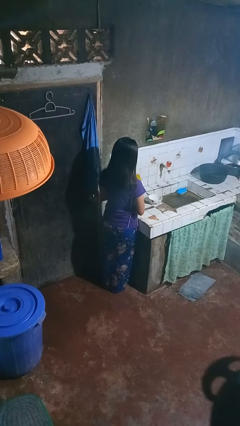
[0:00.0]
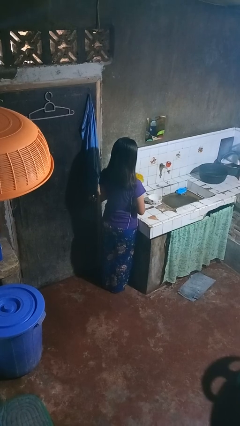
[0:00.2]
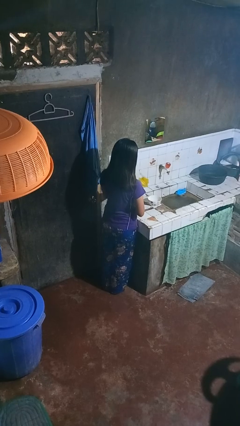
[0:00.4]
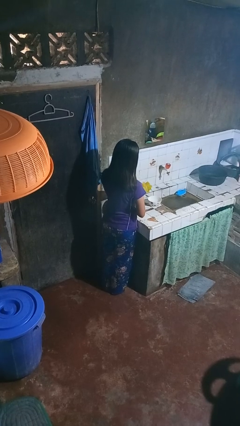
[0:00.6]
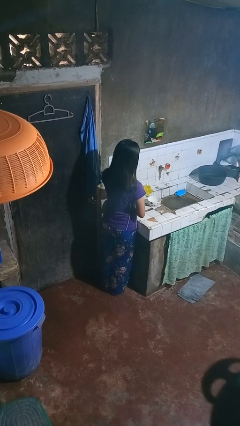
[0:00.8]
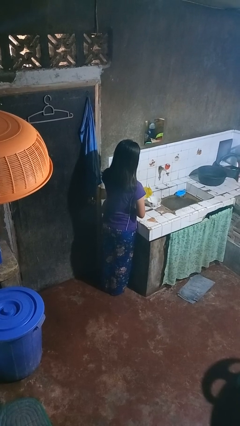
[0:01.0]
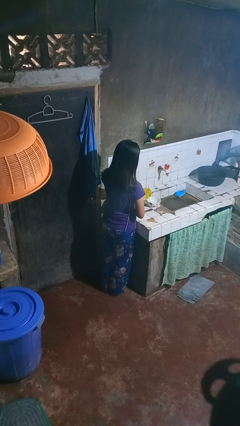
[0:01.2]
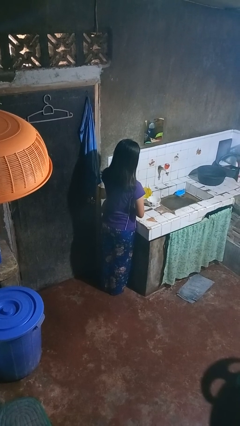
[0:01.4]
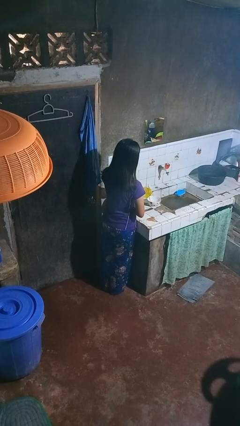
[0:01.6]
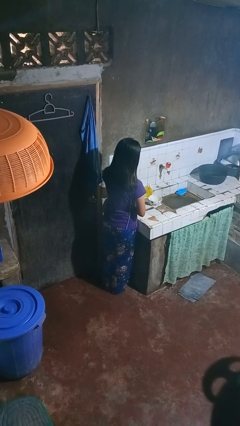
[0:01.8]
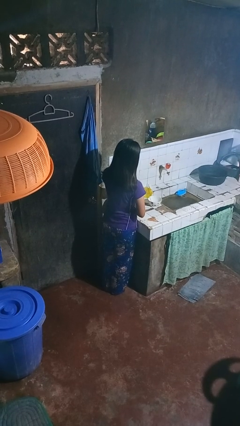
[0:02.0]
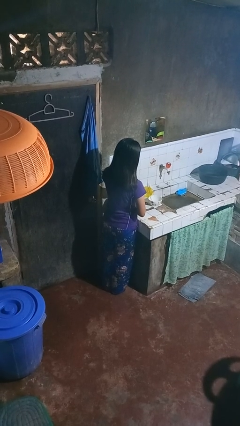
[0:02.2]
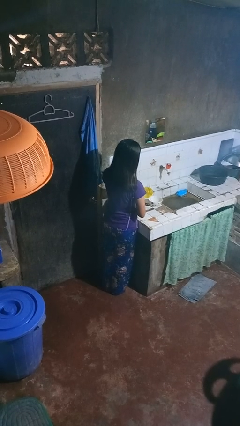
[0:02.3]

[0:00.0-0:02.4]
person pours into bowl

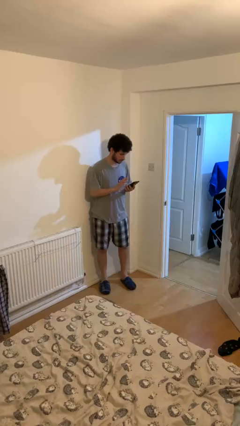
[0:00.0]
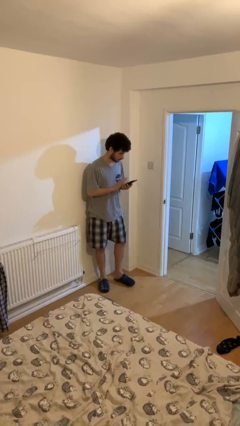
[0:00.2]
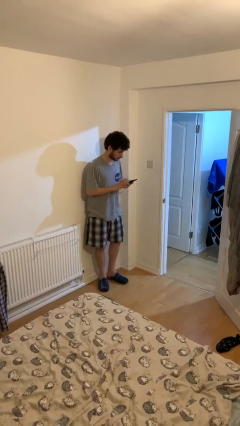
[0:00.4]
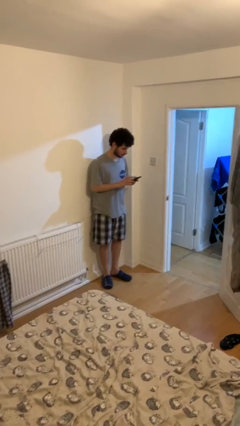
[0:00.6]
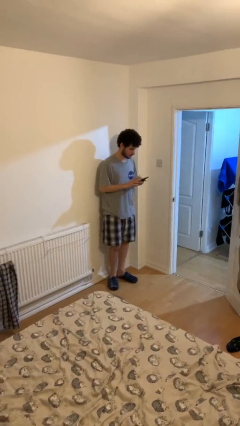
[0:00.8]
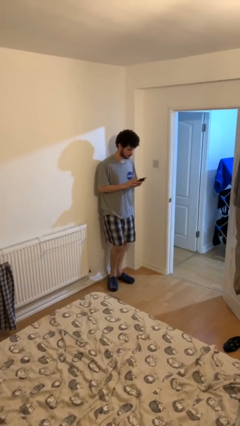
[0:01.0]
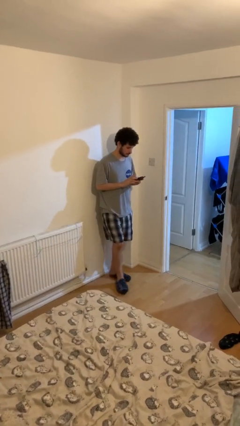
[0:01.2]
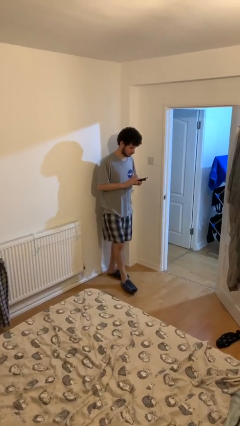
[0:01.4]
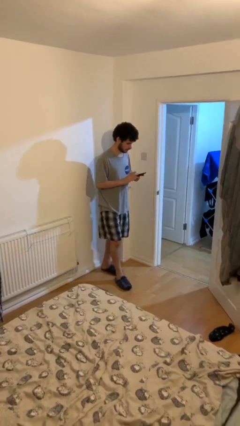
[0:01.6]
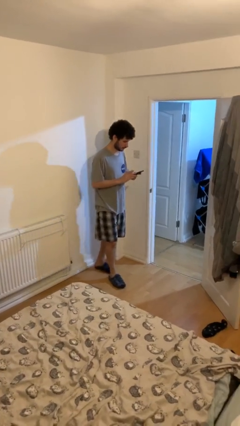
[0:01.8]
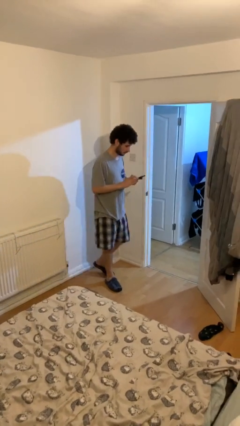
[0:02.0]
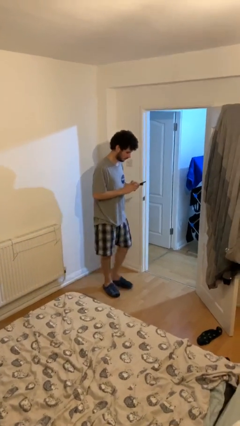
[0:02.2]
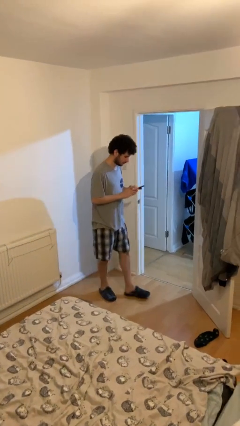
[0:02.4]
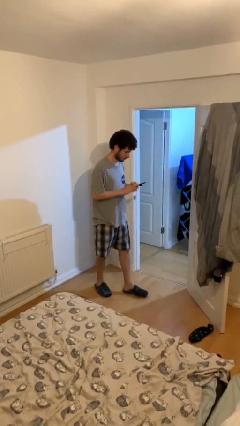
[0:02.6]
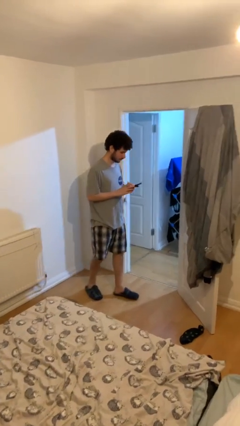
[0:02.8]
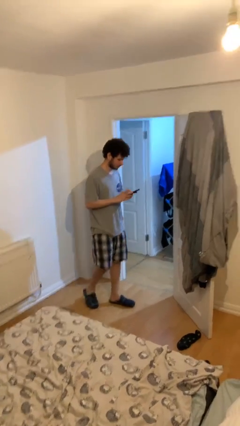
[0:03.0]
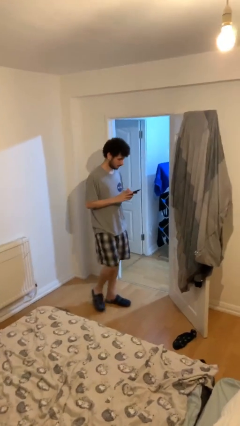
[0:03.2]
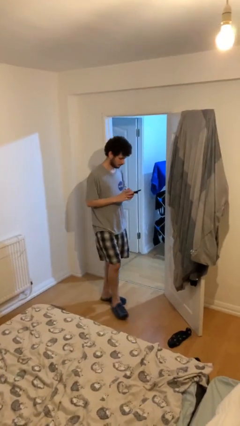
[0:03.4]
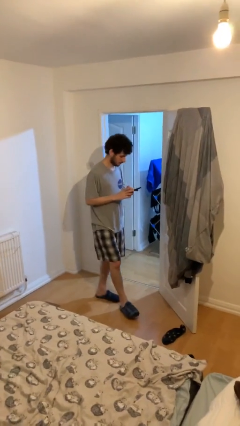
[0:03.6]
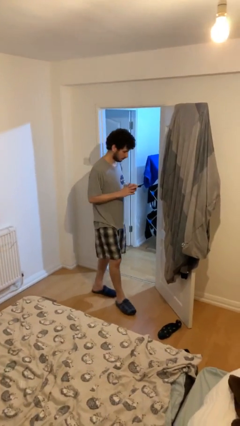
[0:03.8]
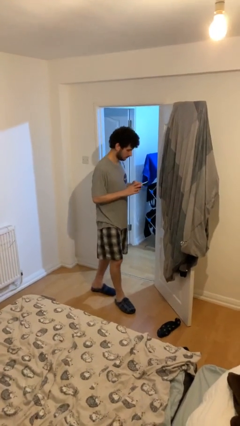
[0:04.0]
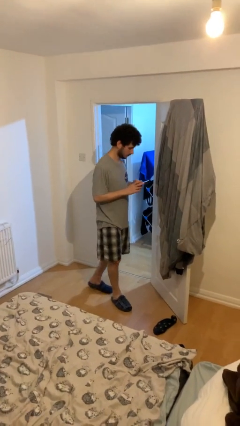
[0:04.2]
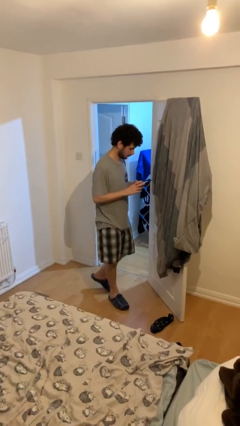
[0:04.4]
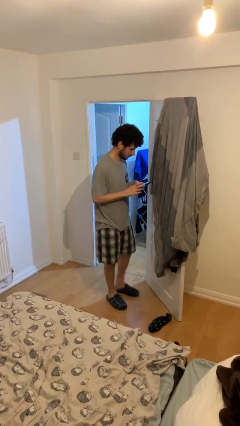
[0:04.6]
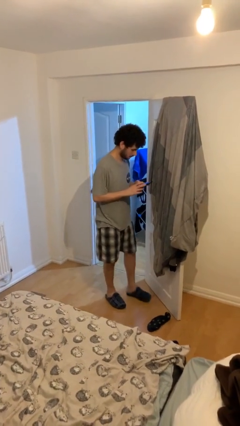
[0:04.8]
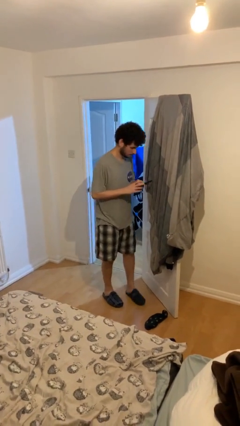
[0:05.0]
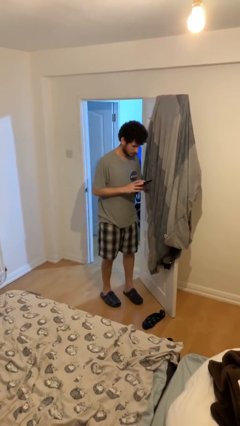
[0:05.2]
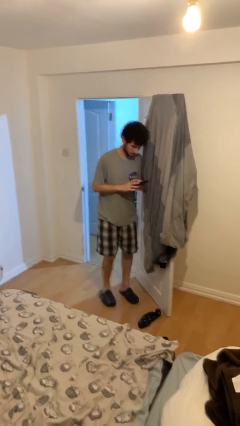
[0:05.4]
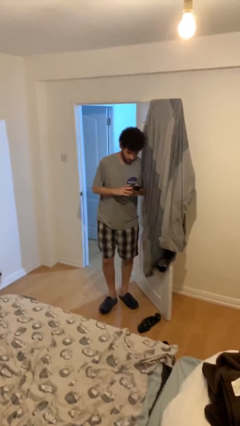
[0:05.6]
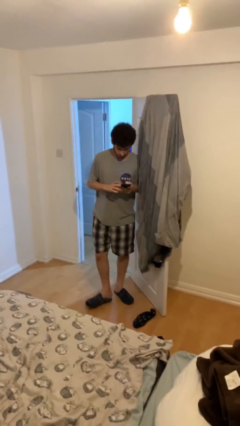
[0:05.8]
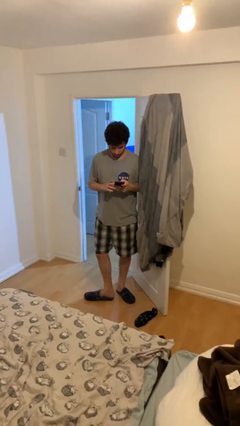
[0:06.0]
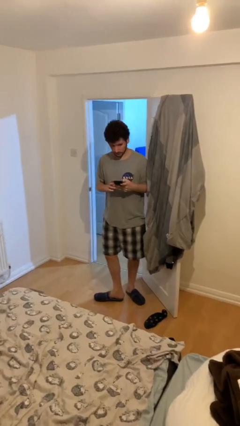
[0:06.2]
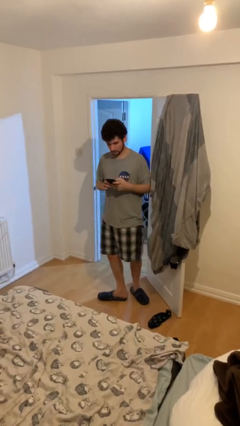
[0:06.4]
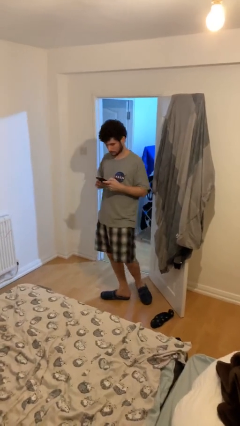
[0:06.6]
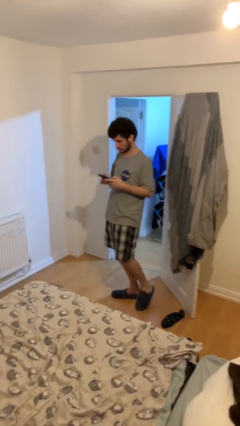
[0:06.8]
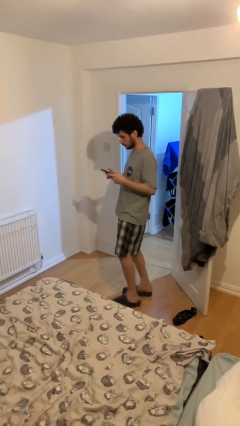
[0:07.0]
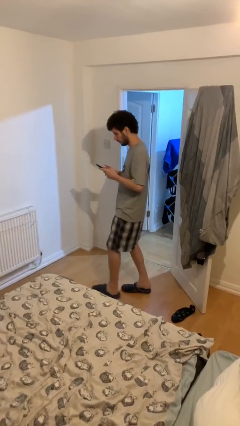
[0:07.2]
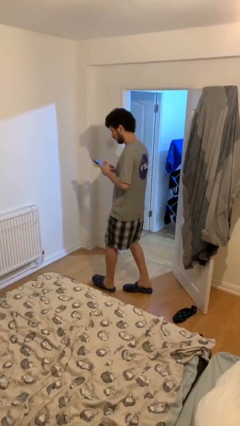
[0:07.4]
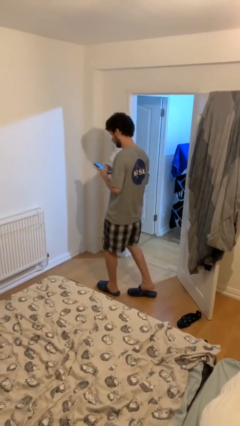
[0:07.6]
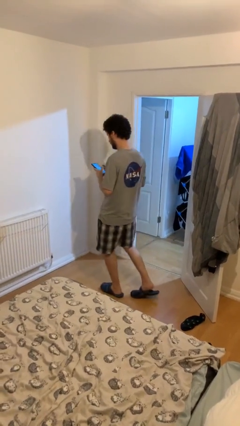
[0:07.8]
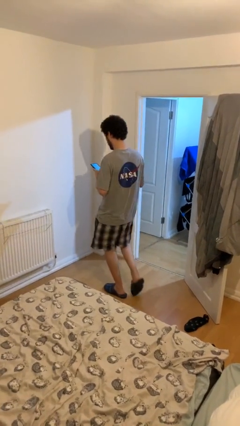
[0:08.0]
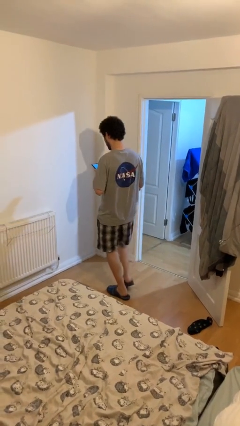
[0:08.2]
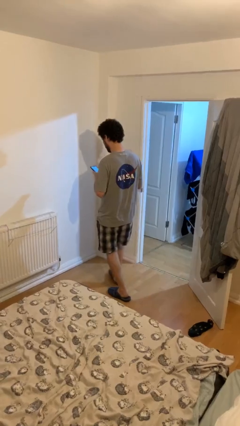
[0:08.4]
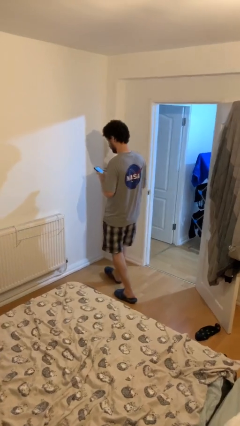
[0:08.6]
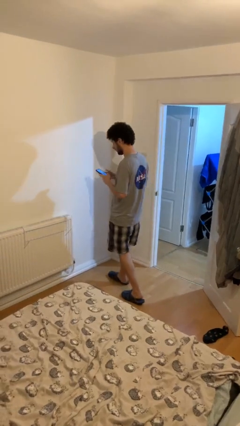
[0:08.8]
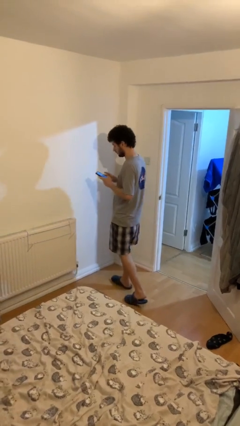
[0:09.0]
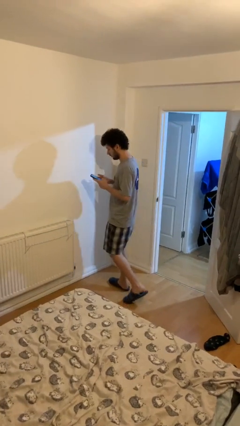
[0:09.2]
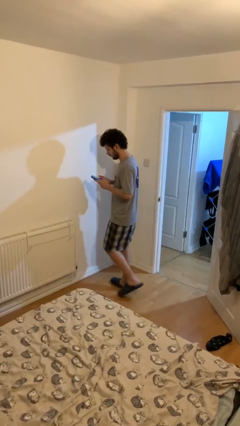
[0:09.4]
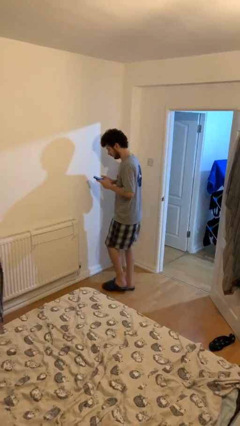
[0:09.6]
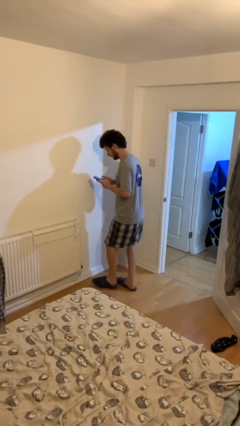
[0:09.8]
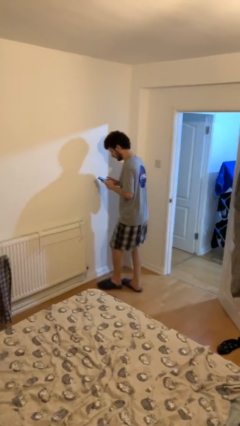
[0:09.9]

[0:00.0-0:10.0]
person texts on phone

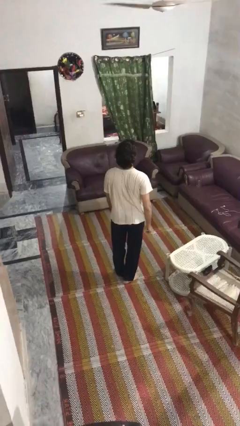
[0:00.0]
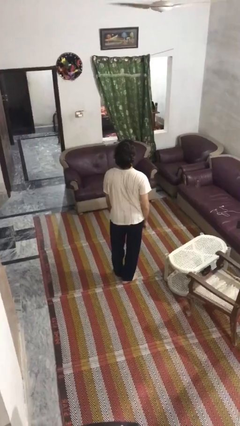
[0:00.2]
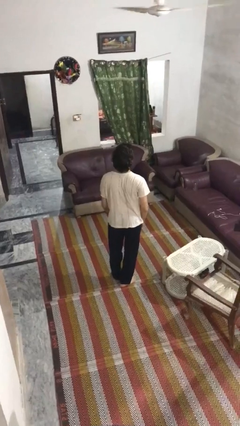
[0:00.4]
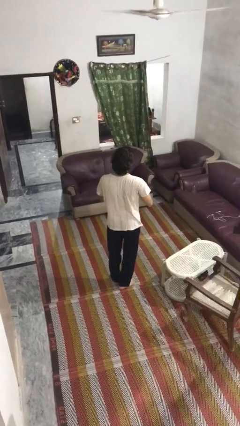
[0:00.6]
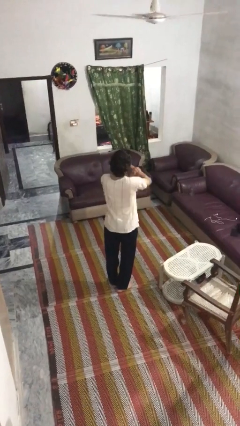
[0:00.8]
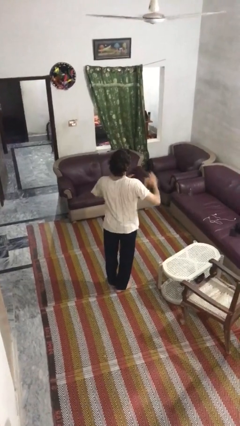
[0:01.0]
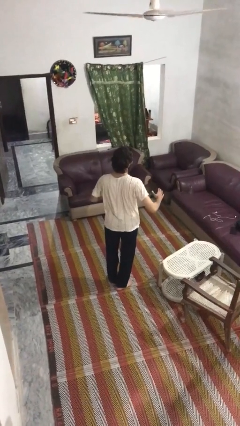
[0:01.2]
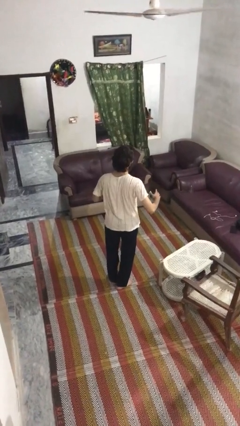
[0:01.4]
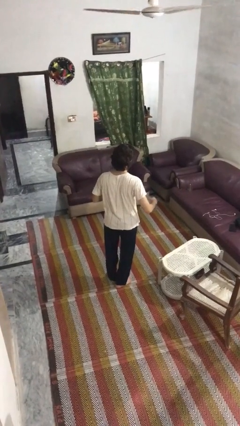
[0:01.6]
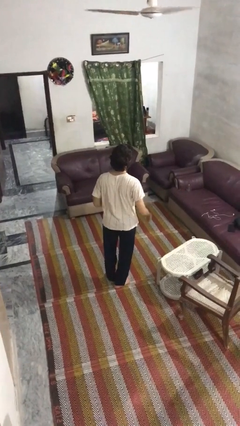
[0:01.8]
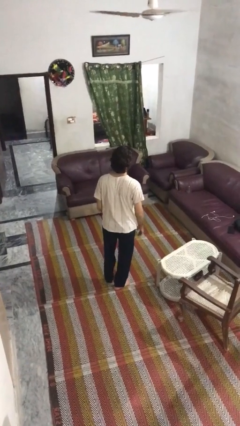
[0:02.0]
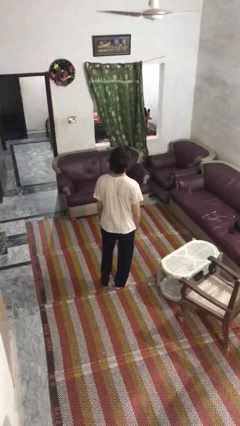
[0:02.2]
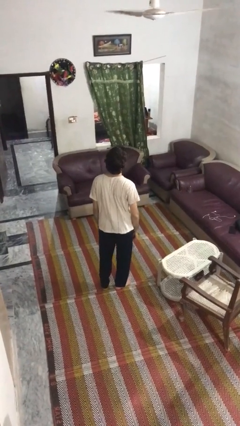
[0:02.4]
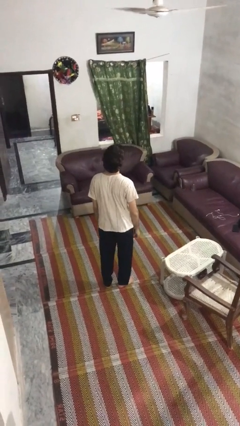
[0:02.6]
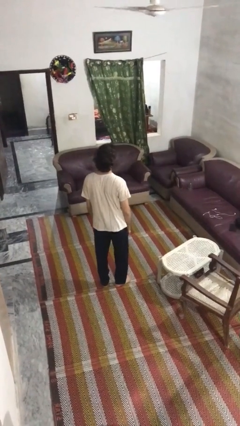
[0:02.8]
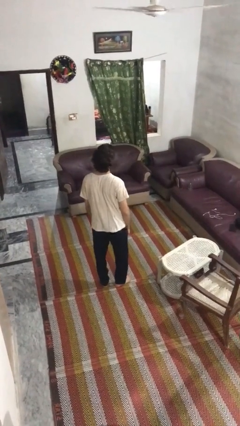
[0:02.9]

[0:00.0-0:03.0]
person karate chop

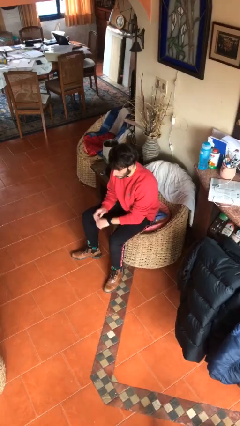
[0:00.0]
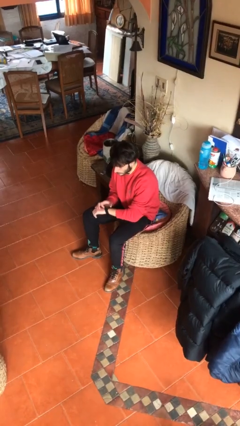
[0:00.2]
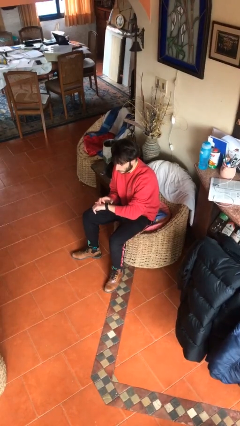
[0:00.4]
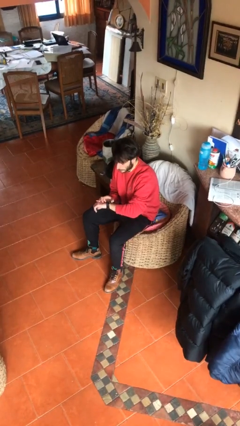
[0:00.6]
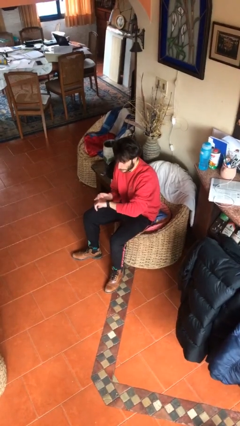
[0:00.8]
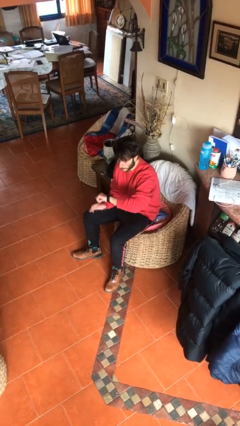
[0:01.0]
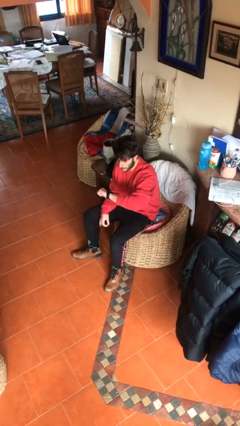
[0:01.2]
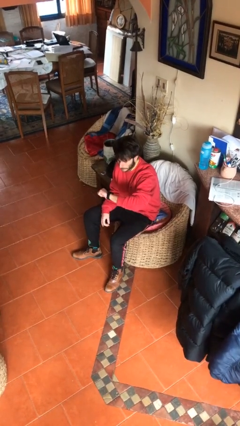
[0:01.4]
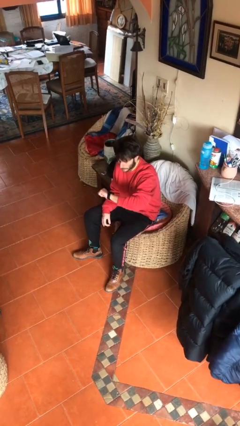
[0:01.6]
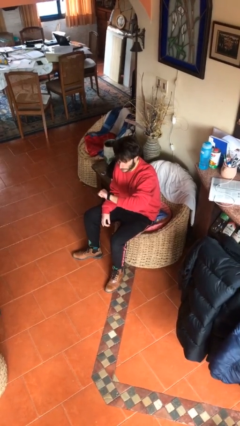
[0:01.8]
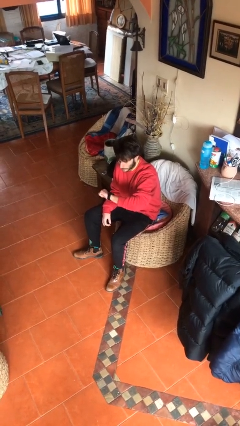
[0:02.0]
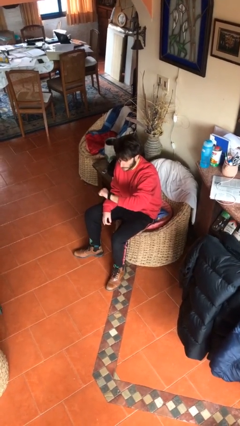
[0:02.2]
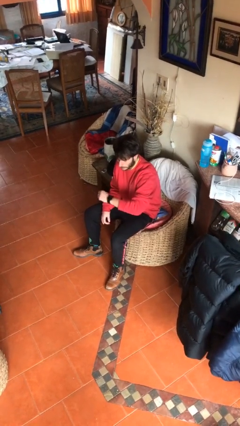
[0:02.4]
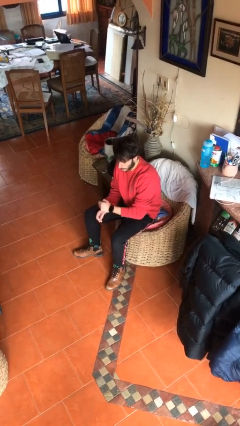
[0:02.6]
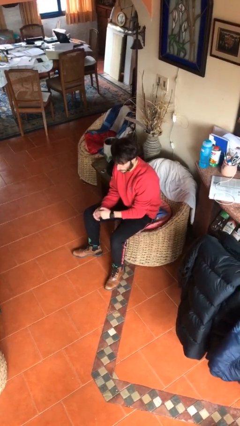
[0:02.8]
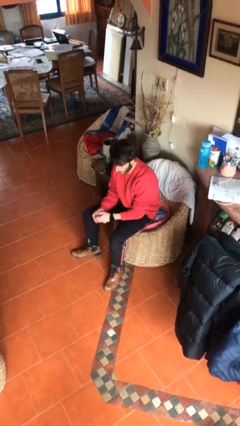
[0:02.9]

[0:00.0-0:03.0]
person looks at wristwatch

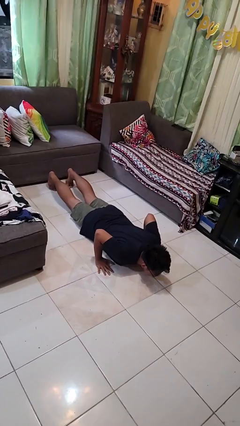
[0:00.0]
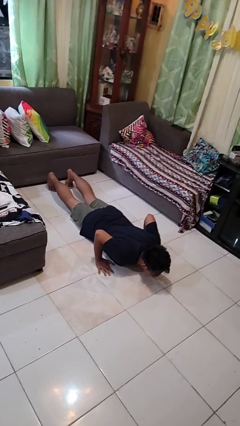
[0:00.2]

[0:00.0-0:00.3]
person exercises with pushup
